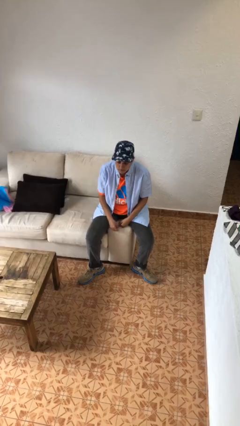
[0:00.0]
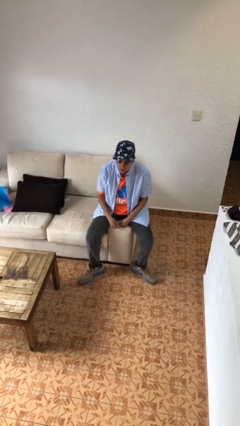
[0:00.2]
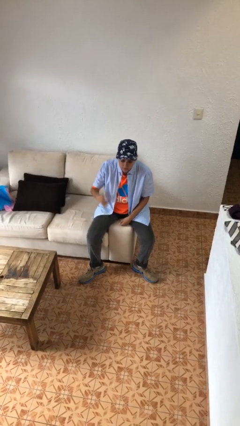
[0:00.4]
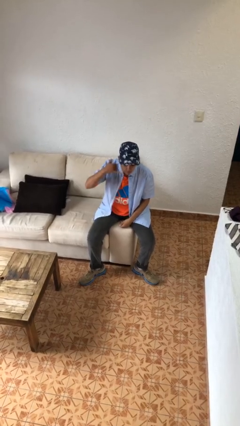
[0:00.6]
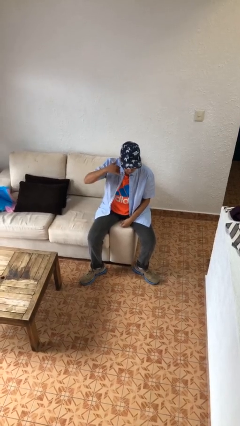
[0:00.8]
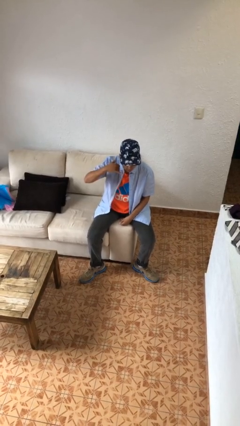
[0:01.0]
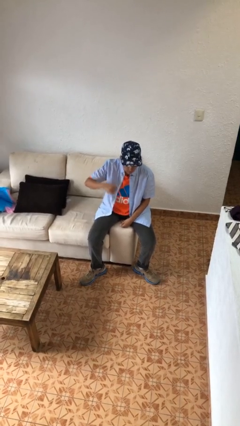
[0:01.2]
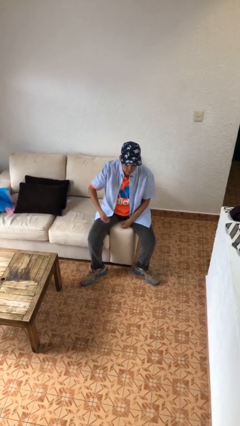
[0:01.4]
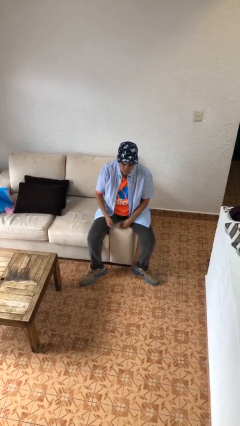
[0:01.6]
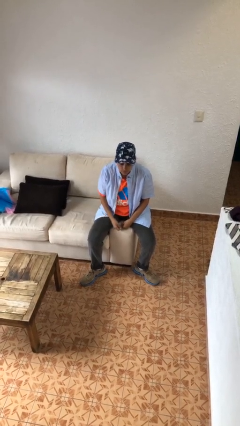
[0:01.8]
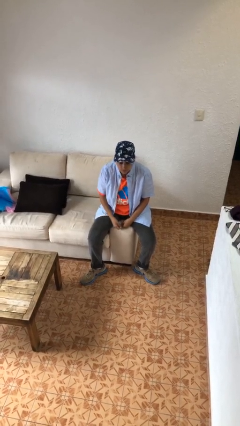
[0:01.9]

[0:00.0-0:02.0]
person gestures call me

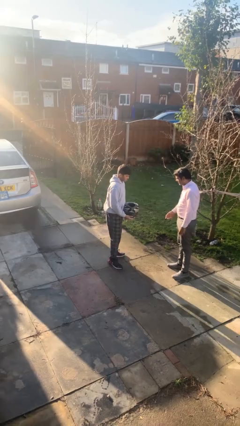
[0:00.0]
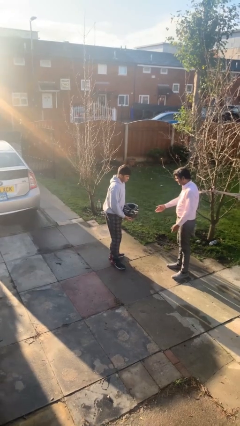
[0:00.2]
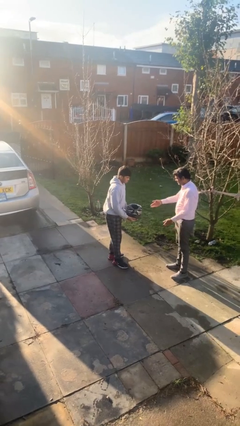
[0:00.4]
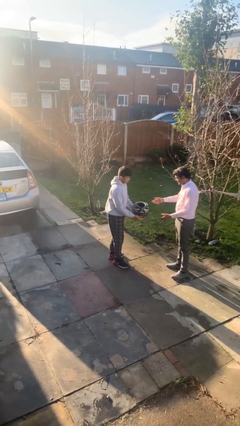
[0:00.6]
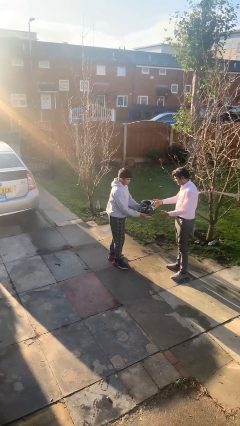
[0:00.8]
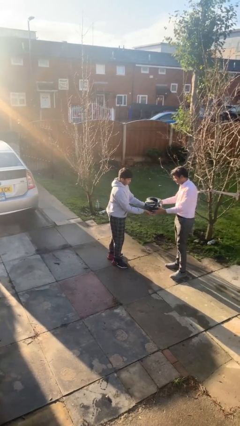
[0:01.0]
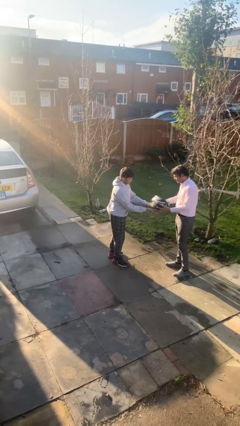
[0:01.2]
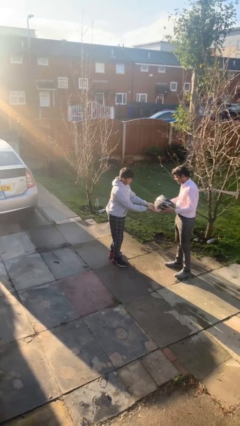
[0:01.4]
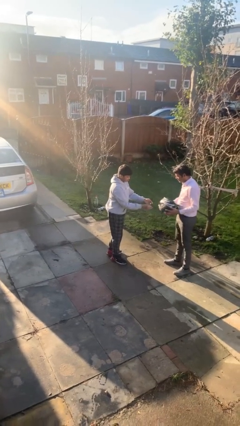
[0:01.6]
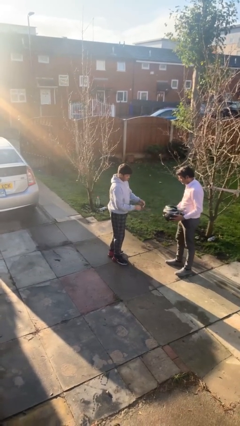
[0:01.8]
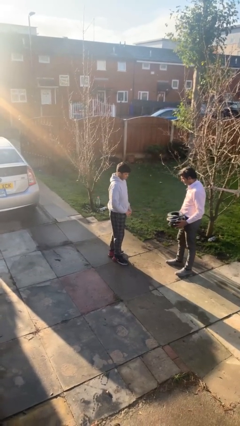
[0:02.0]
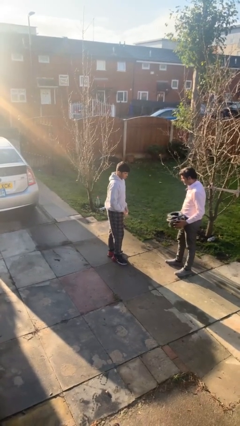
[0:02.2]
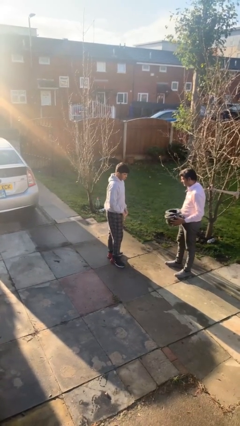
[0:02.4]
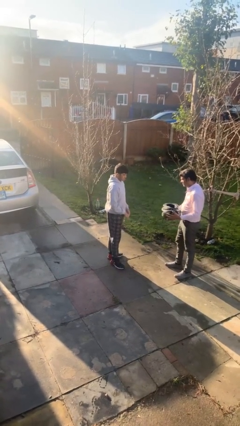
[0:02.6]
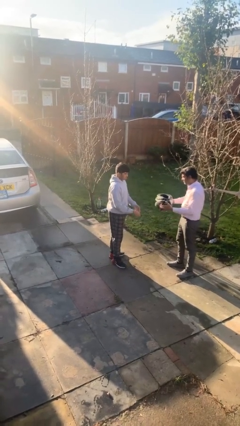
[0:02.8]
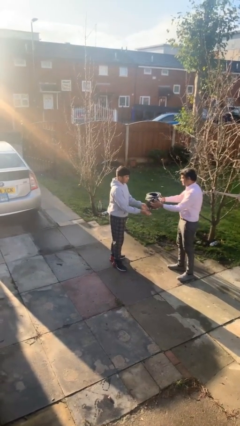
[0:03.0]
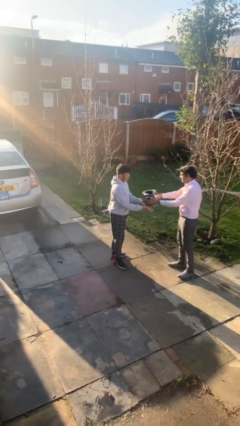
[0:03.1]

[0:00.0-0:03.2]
person transfers object to person

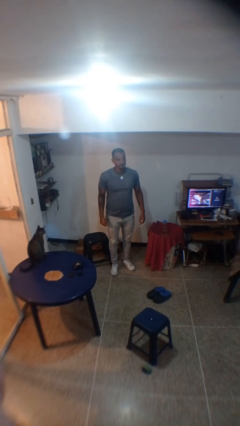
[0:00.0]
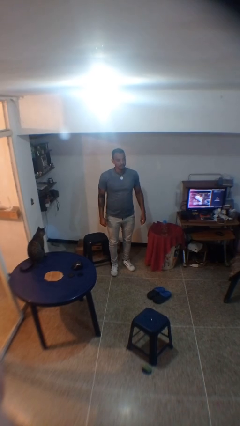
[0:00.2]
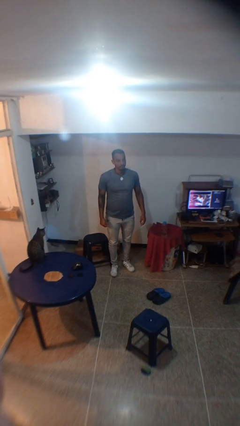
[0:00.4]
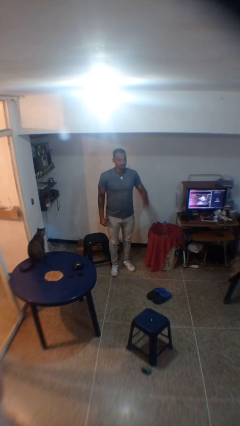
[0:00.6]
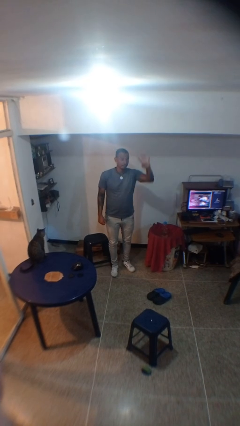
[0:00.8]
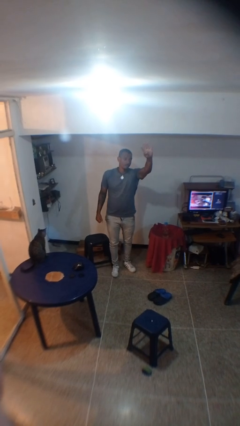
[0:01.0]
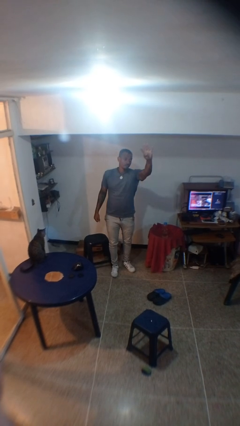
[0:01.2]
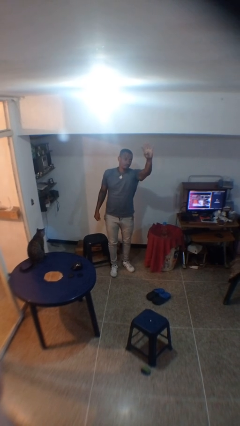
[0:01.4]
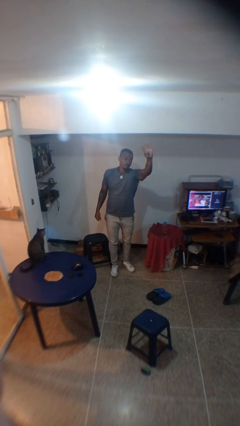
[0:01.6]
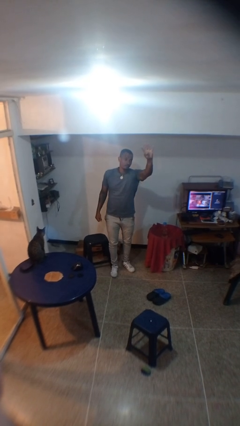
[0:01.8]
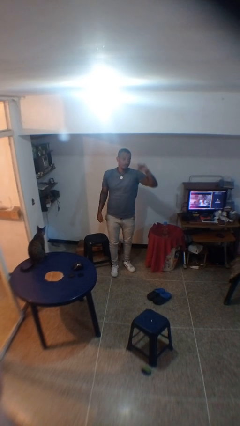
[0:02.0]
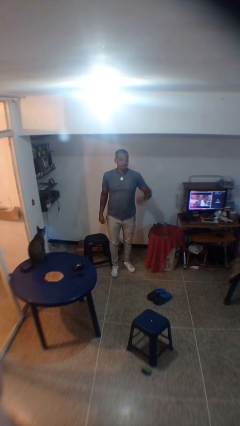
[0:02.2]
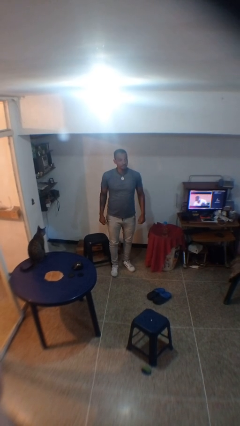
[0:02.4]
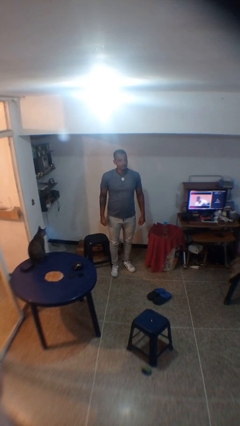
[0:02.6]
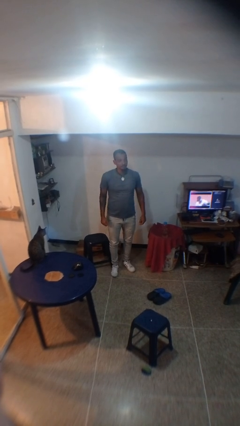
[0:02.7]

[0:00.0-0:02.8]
person gestures number four

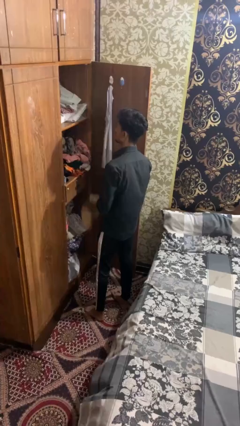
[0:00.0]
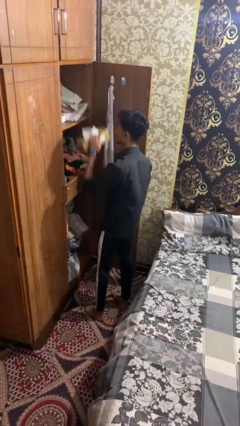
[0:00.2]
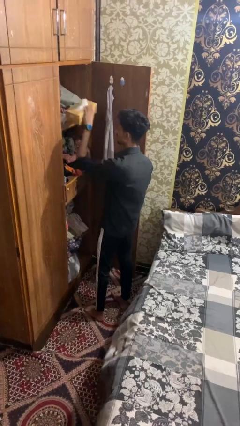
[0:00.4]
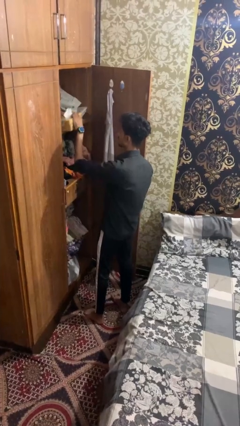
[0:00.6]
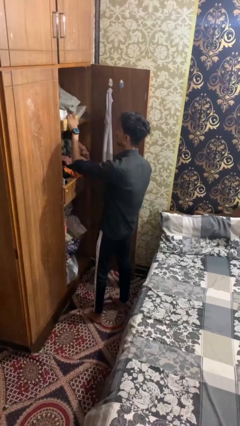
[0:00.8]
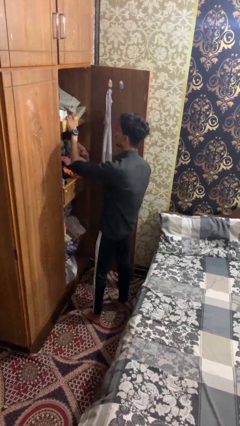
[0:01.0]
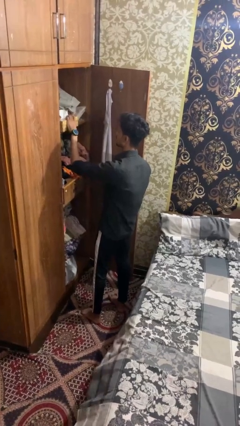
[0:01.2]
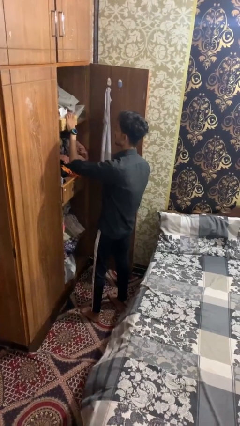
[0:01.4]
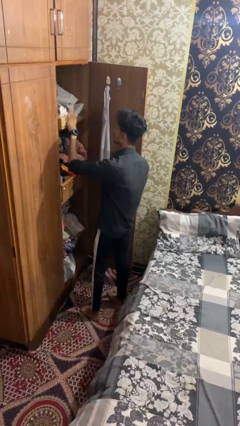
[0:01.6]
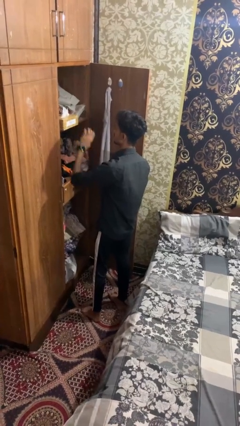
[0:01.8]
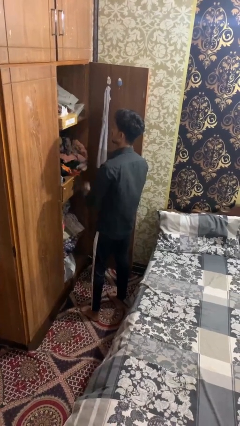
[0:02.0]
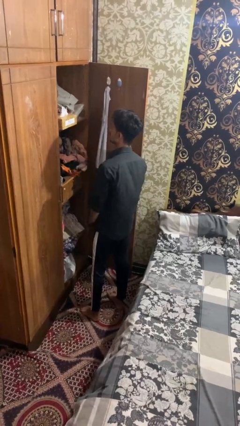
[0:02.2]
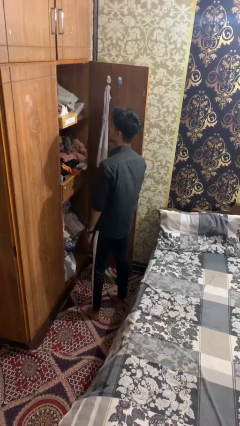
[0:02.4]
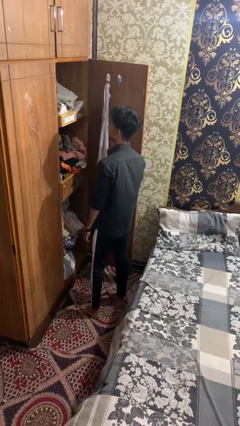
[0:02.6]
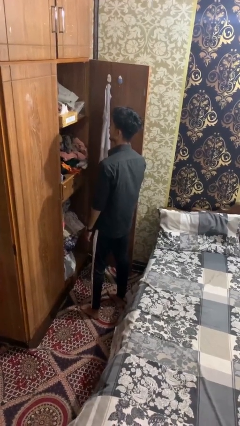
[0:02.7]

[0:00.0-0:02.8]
person puts down object on countertop

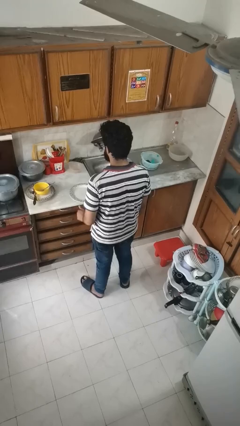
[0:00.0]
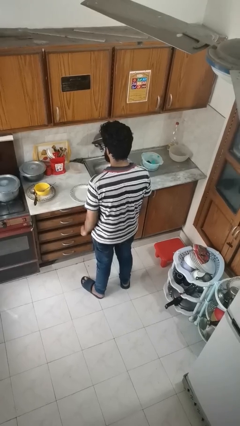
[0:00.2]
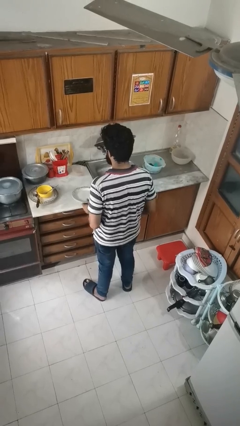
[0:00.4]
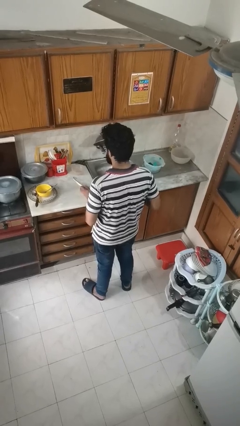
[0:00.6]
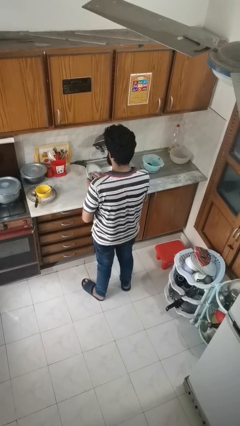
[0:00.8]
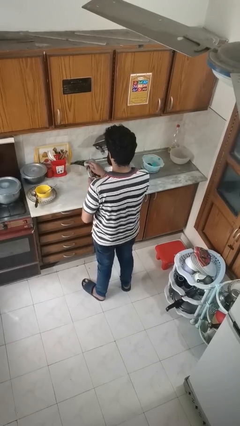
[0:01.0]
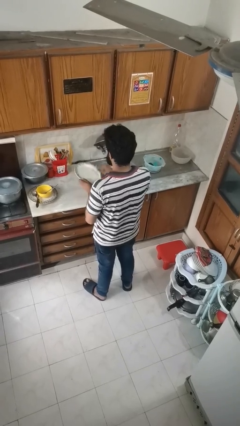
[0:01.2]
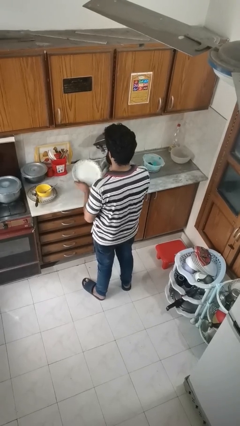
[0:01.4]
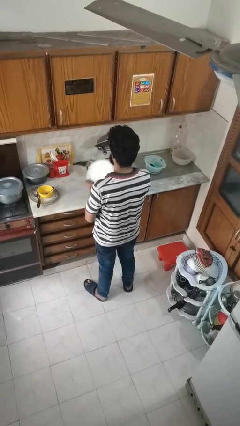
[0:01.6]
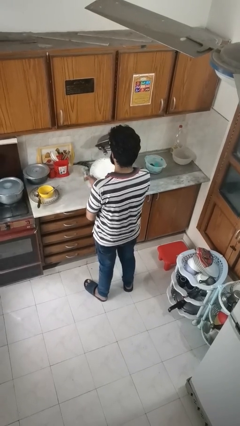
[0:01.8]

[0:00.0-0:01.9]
person dries dish

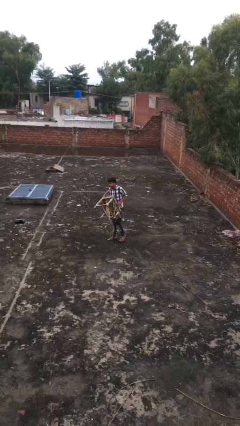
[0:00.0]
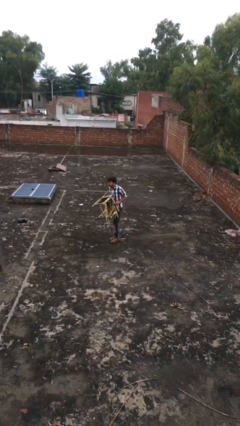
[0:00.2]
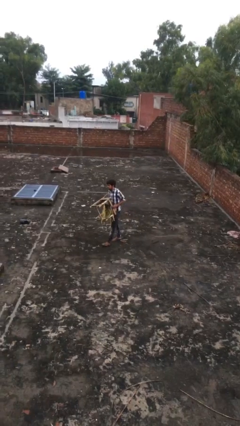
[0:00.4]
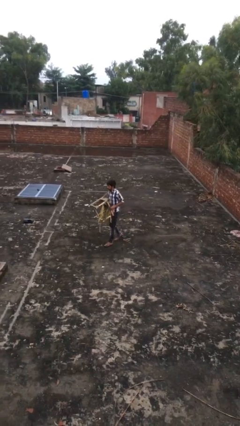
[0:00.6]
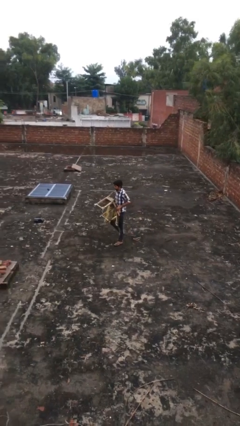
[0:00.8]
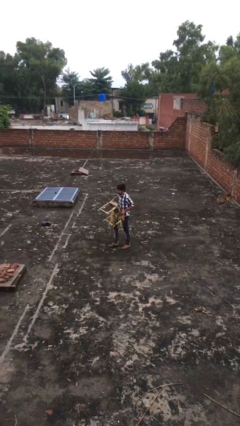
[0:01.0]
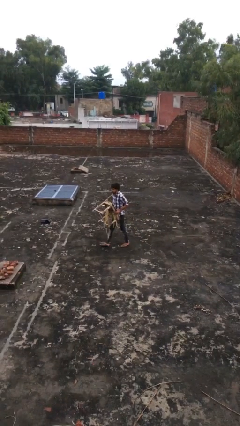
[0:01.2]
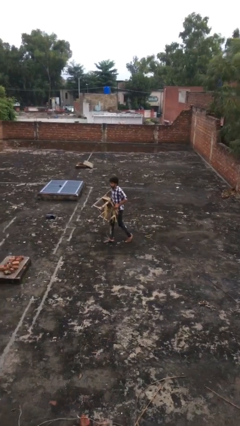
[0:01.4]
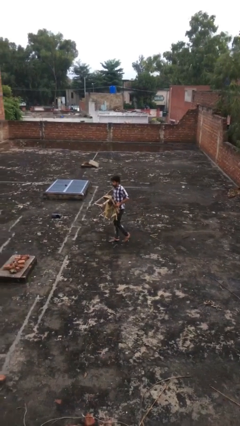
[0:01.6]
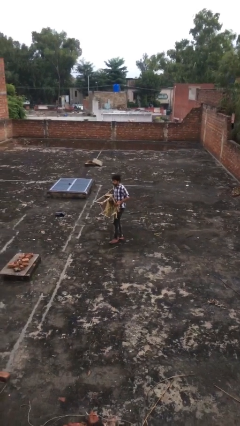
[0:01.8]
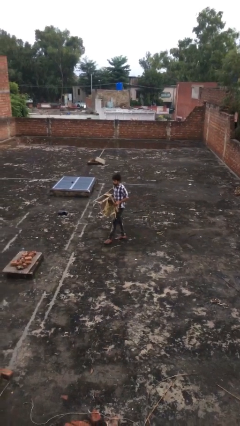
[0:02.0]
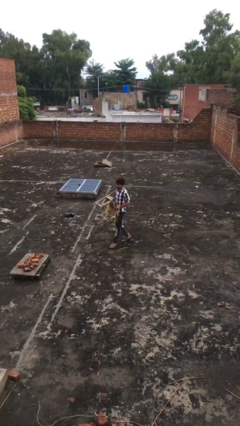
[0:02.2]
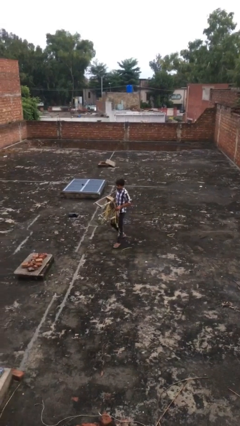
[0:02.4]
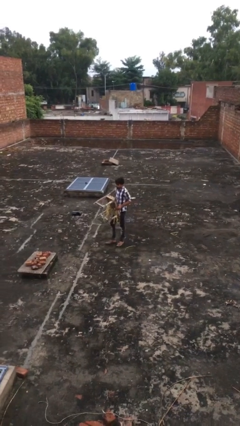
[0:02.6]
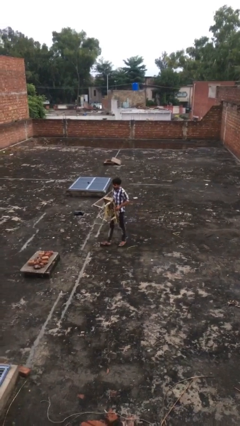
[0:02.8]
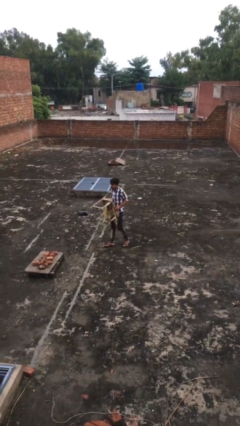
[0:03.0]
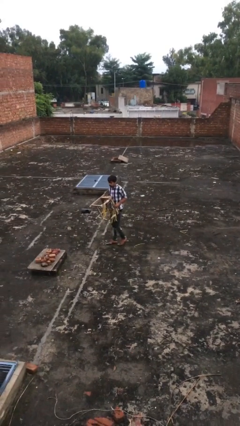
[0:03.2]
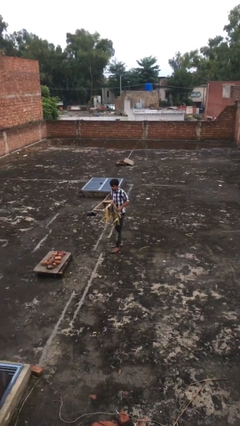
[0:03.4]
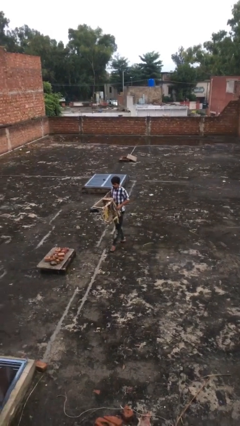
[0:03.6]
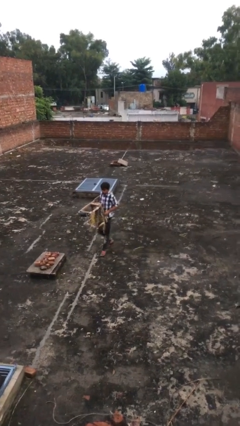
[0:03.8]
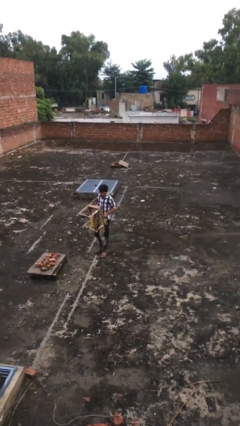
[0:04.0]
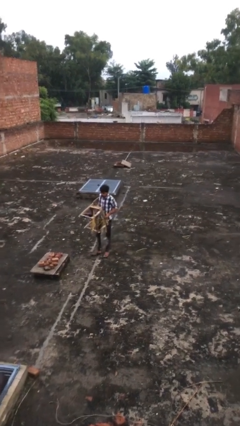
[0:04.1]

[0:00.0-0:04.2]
person carries heavy object
